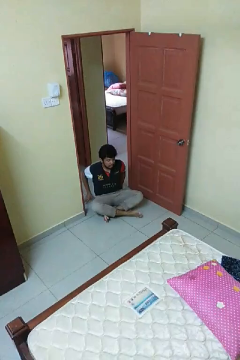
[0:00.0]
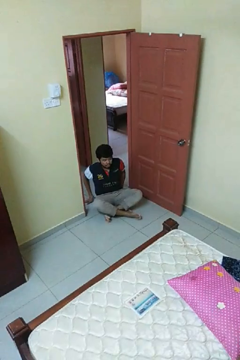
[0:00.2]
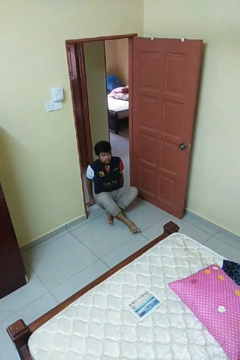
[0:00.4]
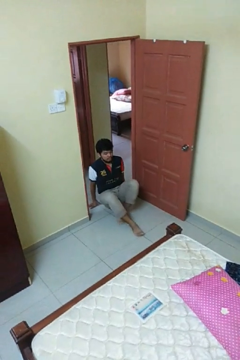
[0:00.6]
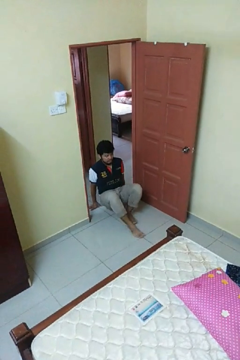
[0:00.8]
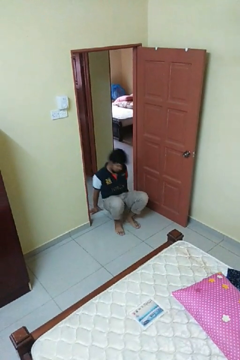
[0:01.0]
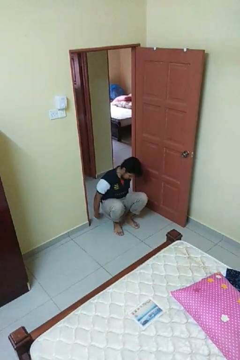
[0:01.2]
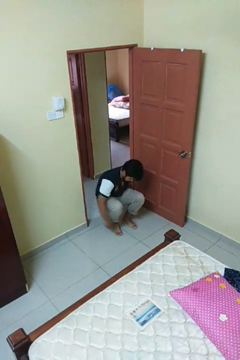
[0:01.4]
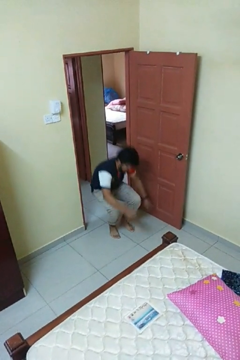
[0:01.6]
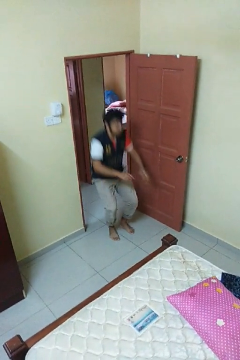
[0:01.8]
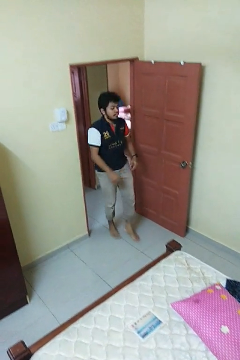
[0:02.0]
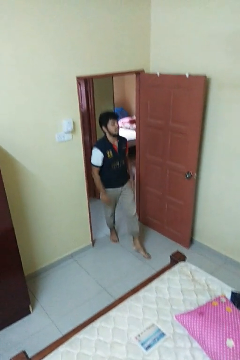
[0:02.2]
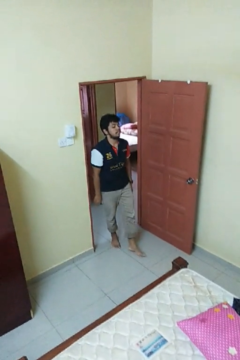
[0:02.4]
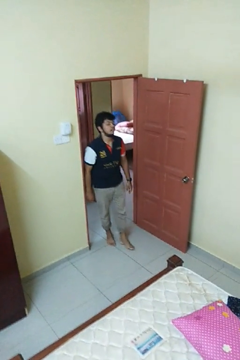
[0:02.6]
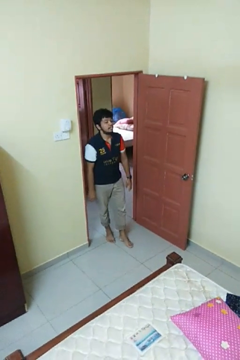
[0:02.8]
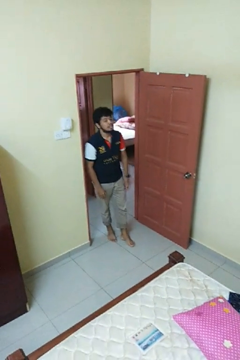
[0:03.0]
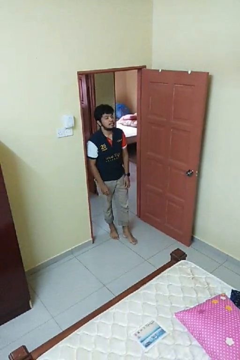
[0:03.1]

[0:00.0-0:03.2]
person stands up from floor

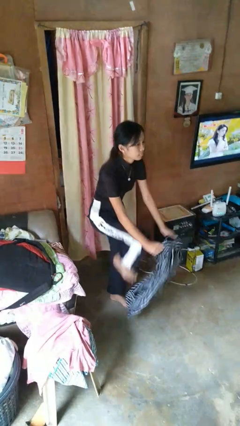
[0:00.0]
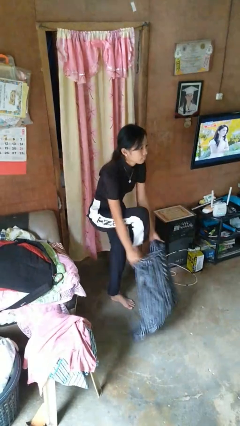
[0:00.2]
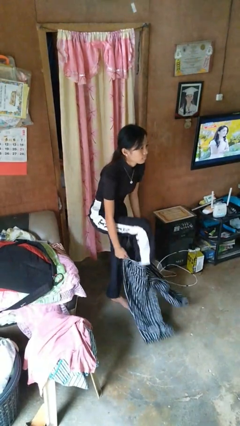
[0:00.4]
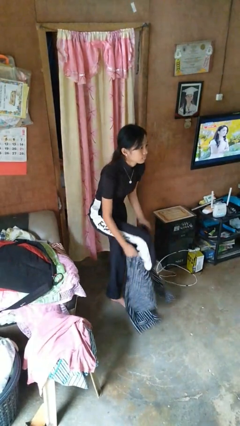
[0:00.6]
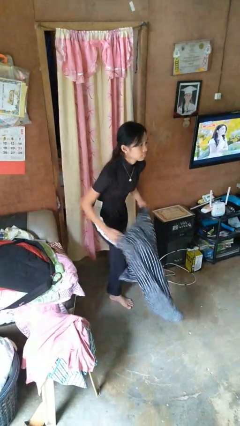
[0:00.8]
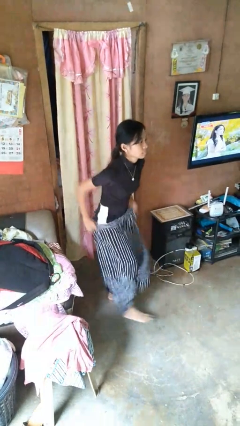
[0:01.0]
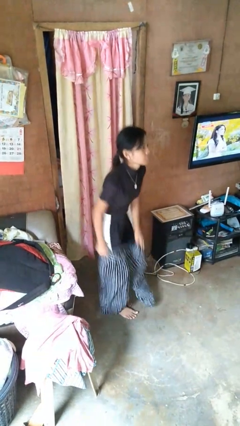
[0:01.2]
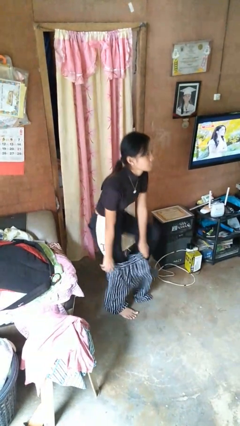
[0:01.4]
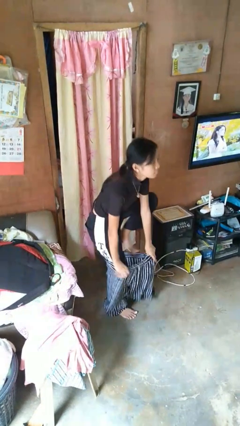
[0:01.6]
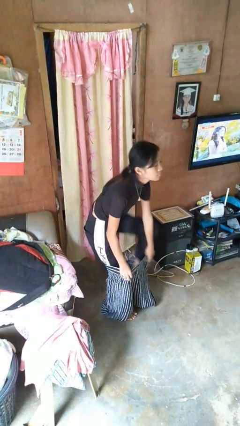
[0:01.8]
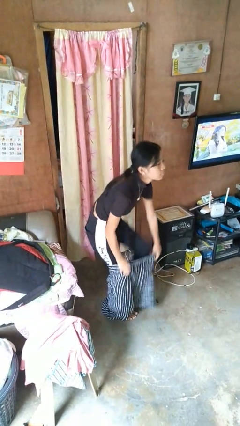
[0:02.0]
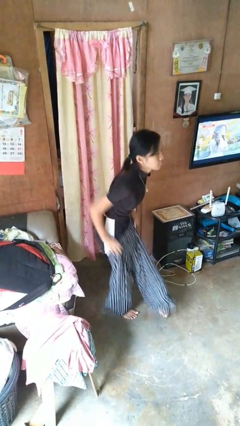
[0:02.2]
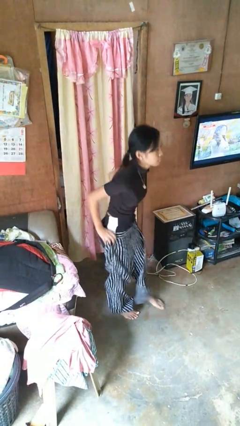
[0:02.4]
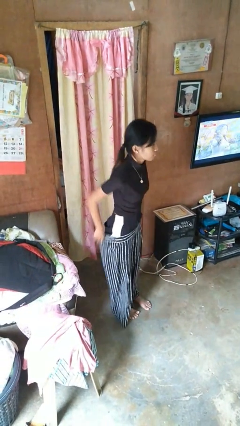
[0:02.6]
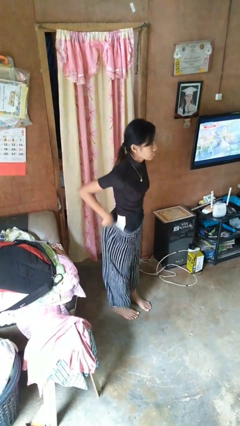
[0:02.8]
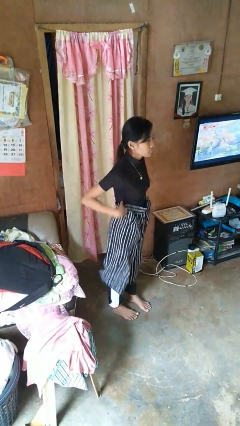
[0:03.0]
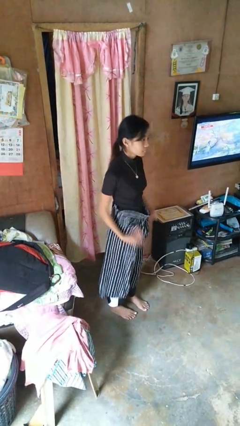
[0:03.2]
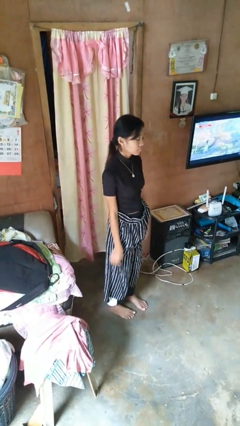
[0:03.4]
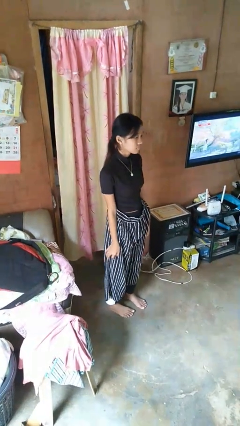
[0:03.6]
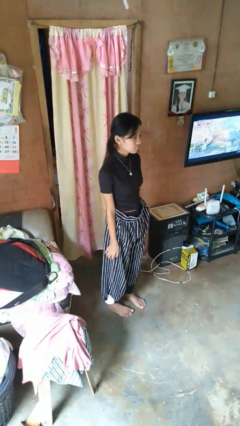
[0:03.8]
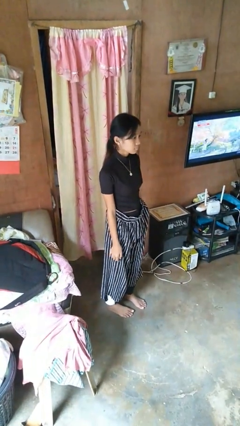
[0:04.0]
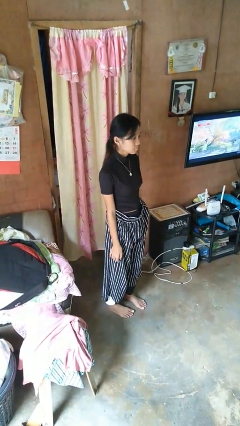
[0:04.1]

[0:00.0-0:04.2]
person puts on pants

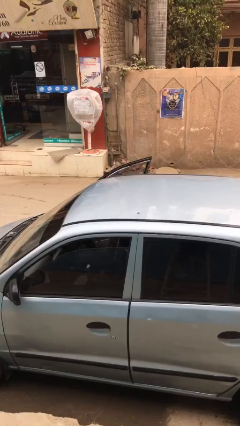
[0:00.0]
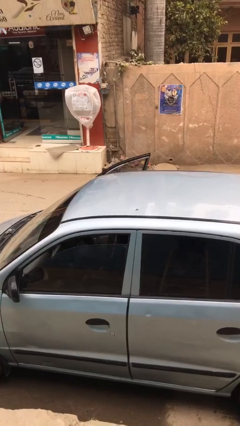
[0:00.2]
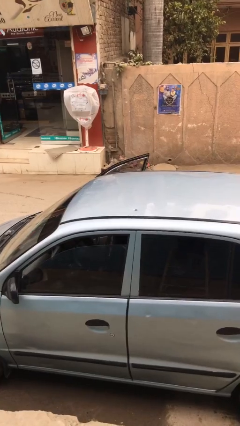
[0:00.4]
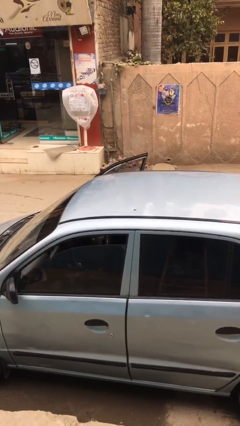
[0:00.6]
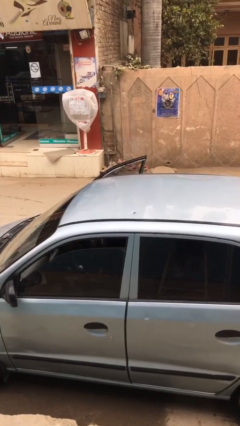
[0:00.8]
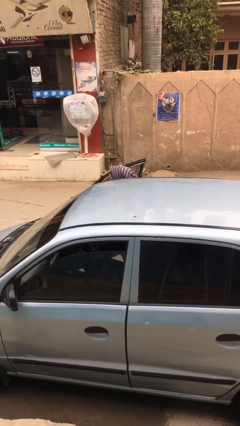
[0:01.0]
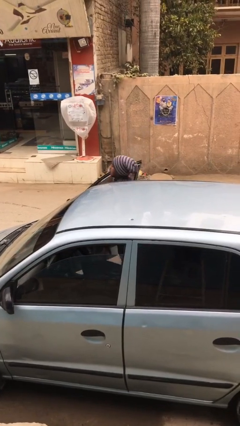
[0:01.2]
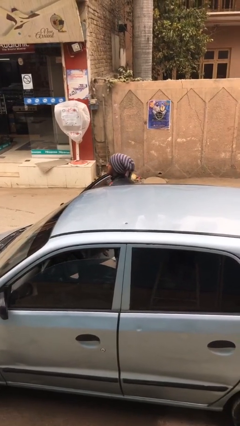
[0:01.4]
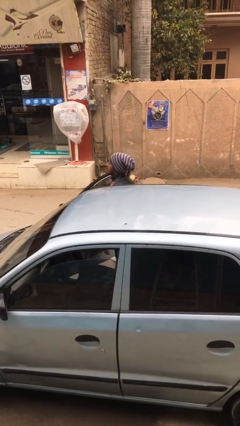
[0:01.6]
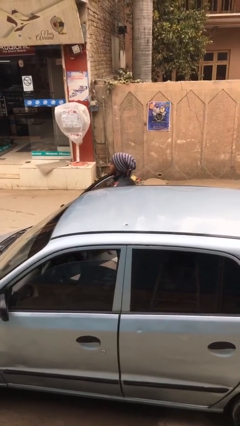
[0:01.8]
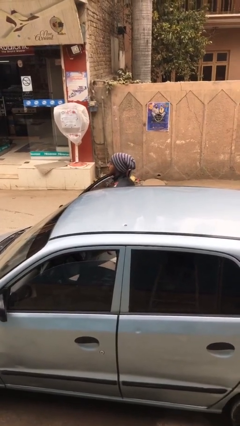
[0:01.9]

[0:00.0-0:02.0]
person exits car

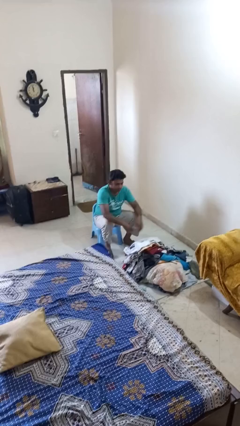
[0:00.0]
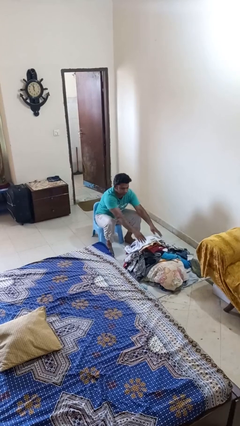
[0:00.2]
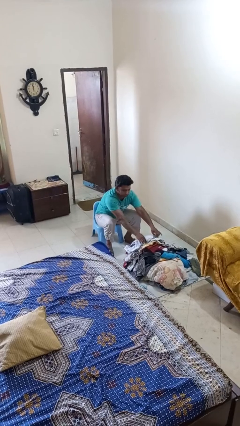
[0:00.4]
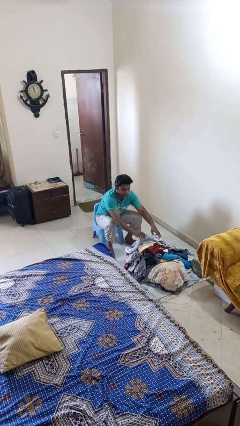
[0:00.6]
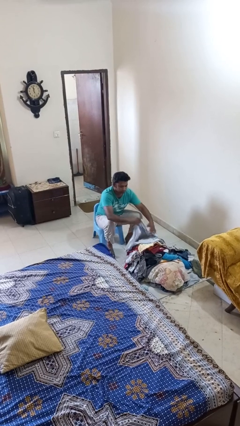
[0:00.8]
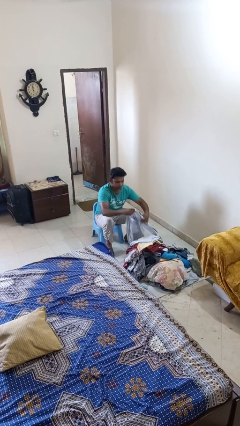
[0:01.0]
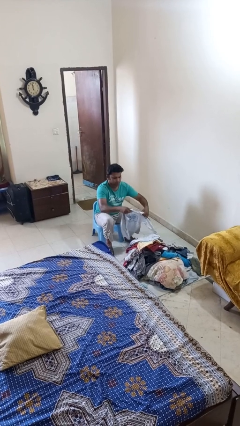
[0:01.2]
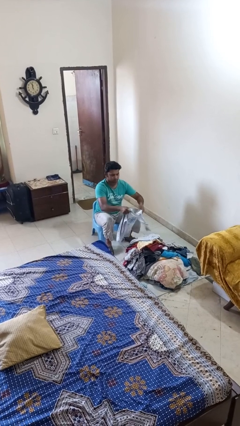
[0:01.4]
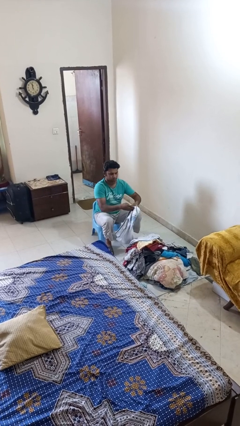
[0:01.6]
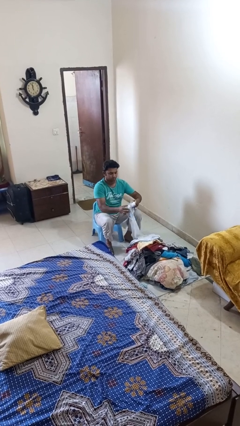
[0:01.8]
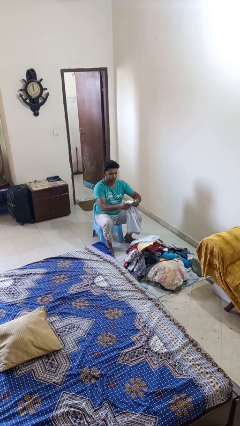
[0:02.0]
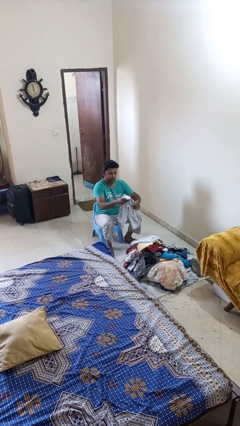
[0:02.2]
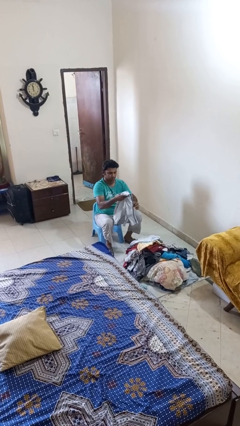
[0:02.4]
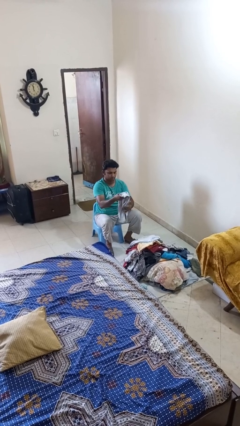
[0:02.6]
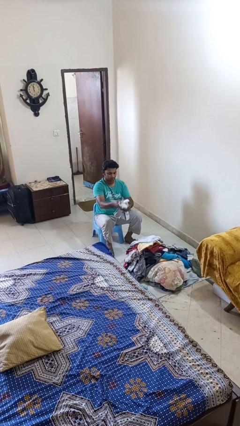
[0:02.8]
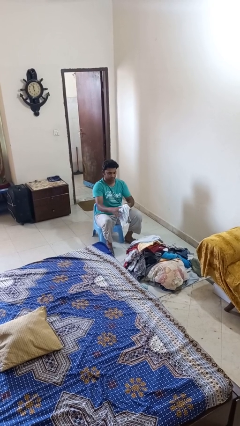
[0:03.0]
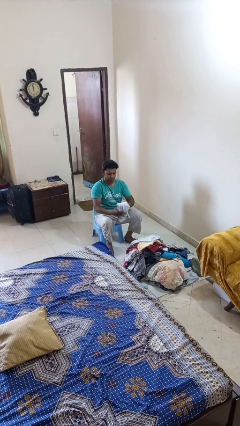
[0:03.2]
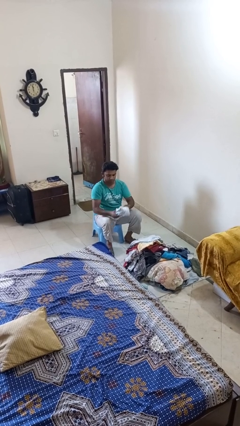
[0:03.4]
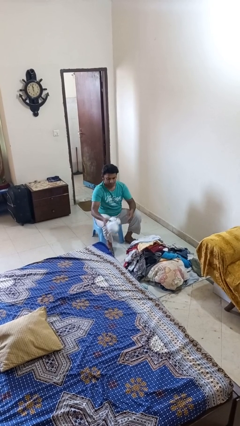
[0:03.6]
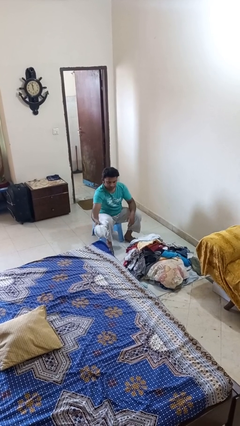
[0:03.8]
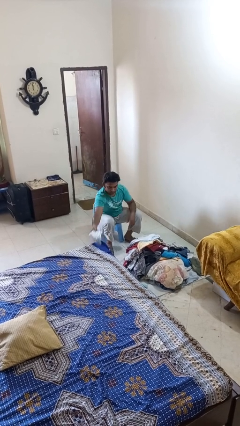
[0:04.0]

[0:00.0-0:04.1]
person folds shirt

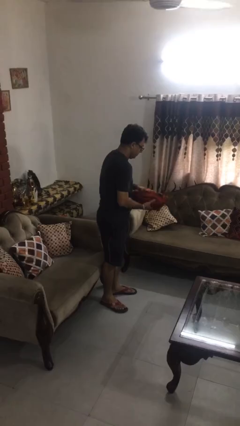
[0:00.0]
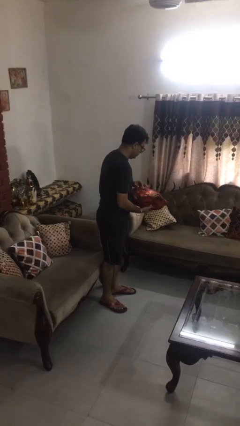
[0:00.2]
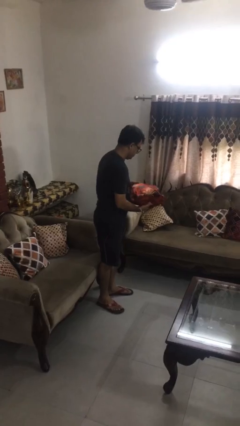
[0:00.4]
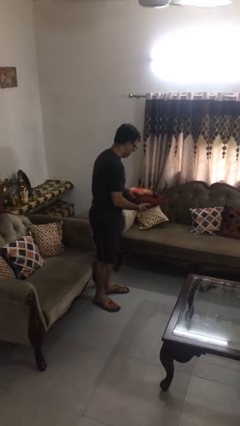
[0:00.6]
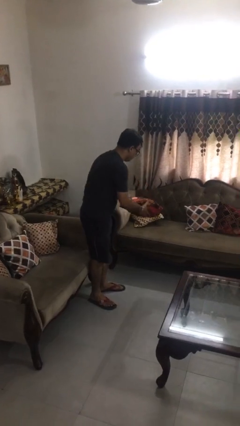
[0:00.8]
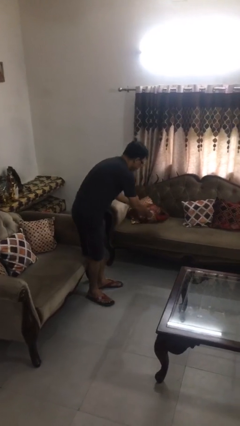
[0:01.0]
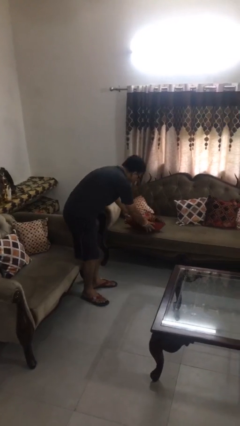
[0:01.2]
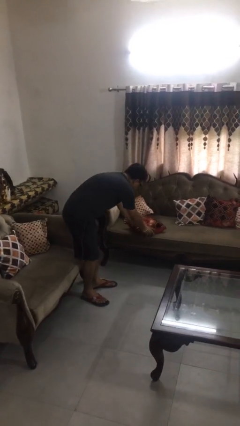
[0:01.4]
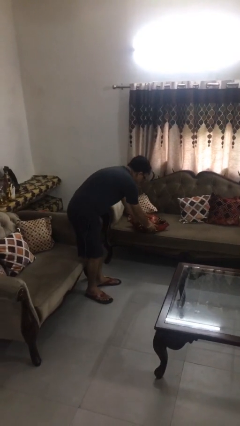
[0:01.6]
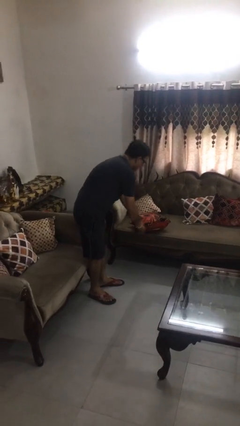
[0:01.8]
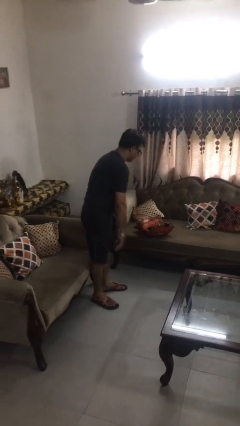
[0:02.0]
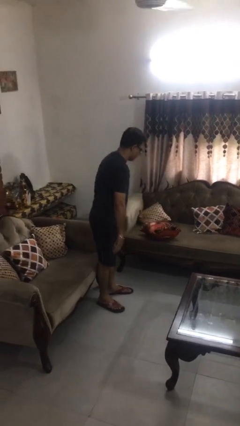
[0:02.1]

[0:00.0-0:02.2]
person puts down object on couch

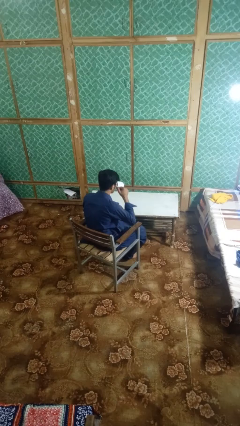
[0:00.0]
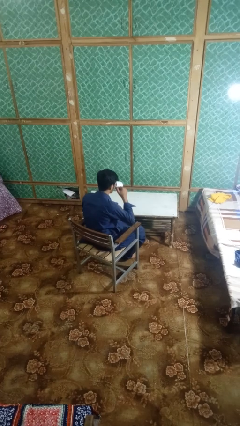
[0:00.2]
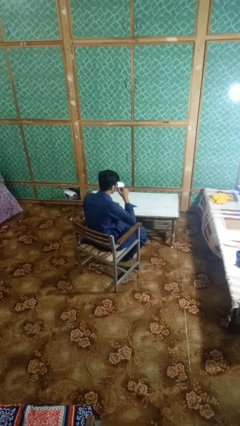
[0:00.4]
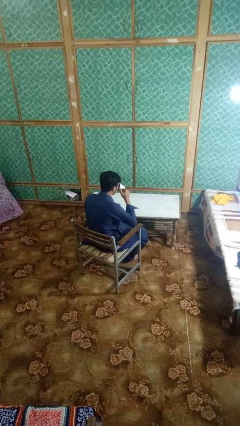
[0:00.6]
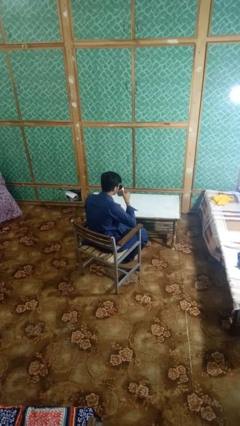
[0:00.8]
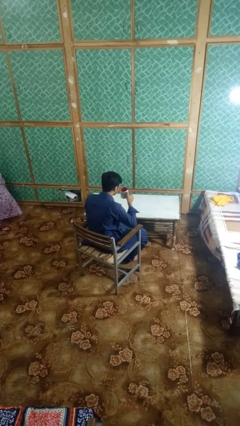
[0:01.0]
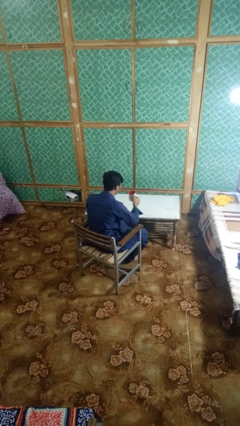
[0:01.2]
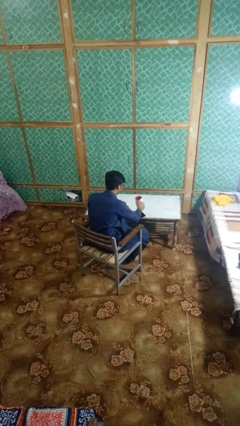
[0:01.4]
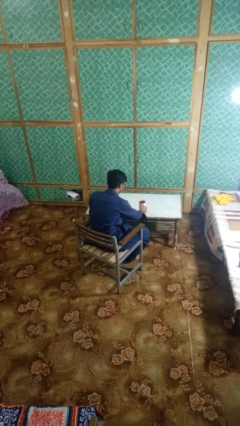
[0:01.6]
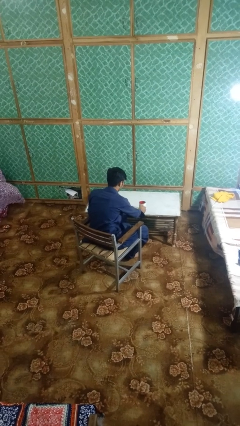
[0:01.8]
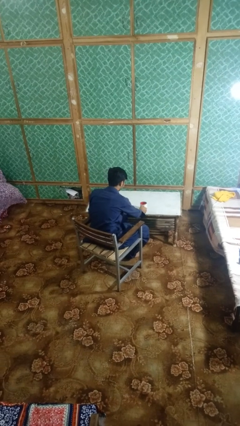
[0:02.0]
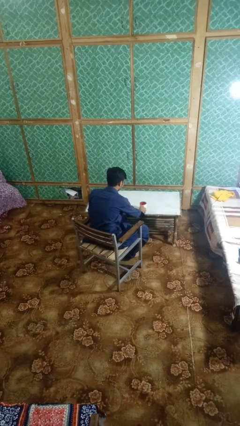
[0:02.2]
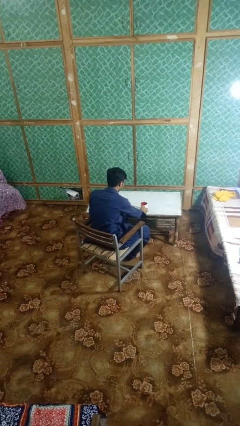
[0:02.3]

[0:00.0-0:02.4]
person puts down object on table
